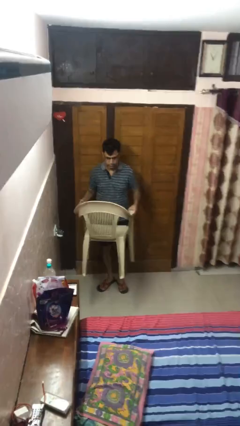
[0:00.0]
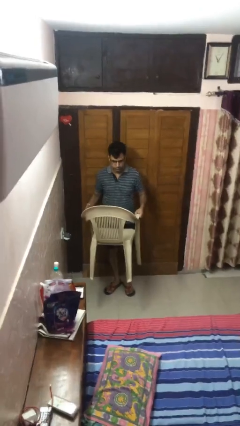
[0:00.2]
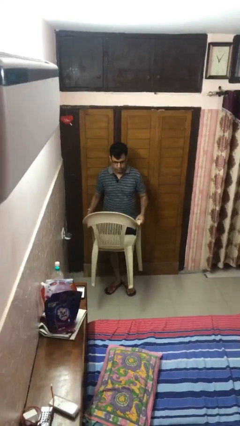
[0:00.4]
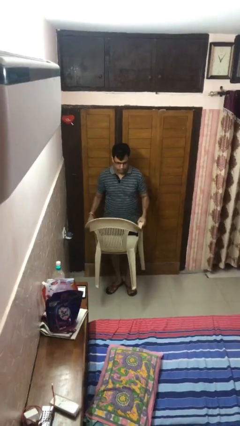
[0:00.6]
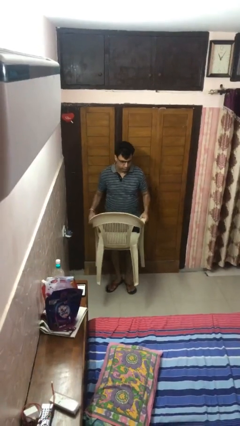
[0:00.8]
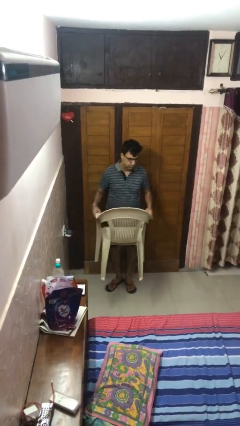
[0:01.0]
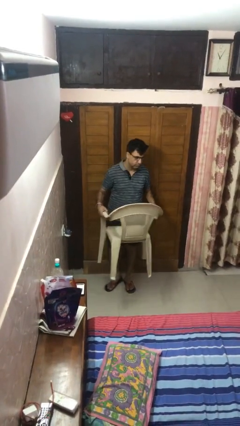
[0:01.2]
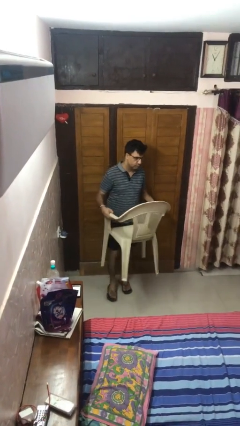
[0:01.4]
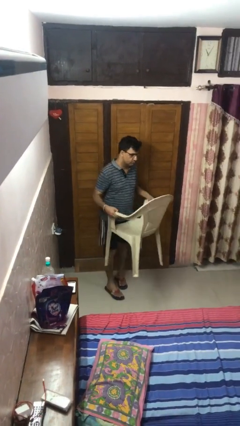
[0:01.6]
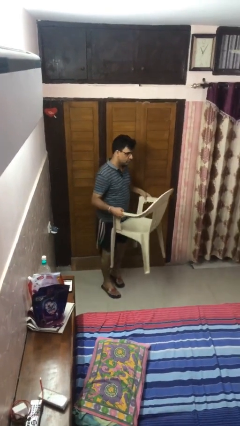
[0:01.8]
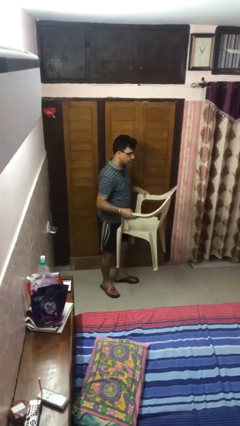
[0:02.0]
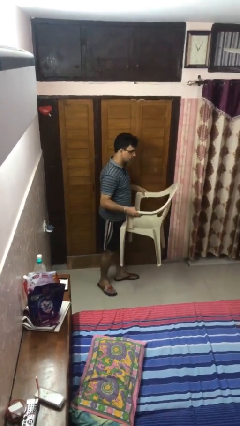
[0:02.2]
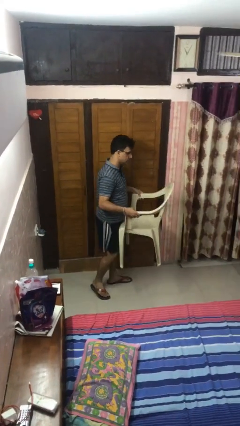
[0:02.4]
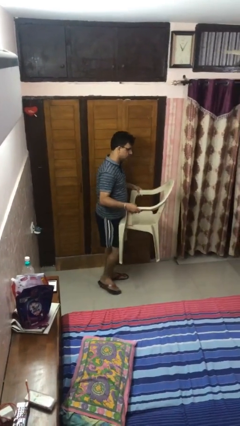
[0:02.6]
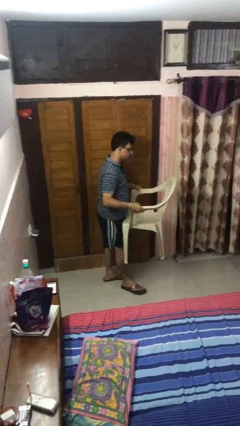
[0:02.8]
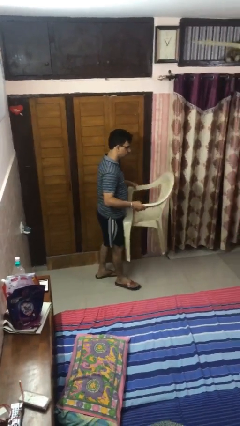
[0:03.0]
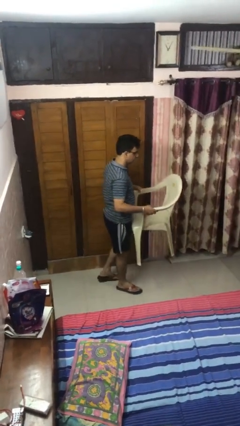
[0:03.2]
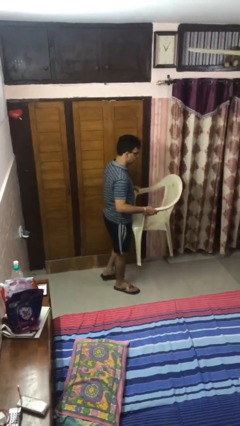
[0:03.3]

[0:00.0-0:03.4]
person carries furniture

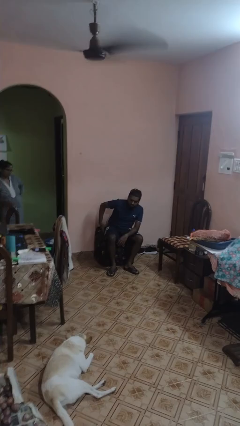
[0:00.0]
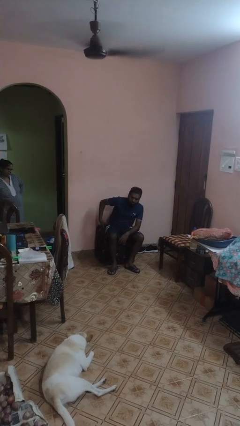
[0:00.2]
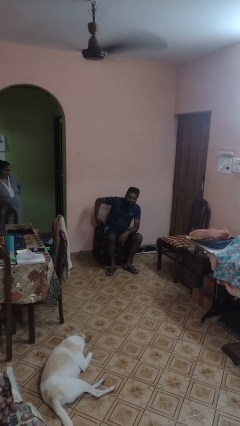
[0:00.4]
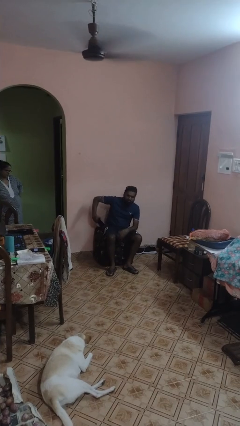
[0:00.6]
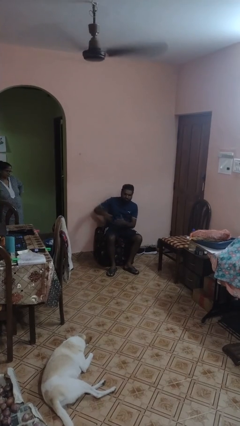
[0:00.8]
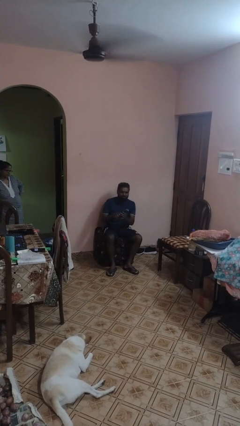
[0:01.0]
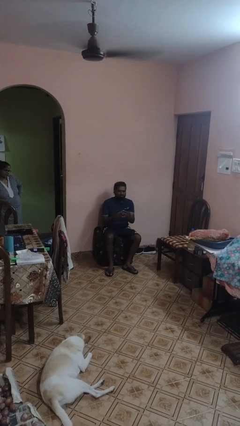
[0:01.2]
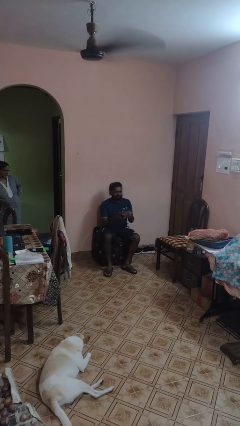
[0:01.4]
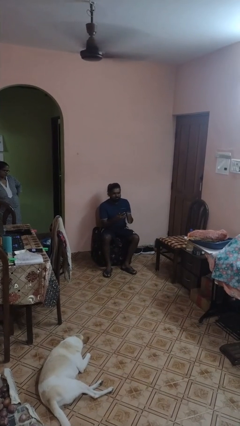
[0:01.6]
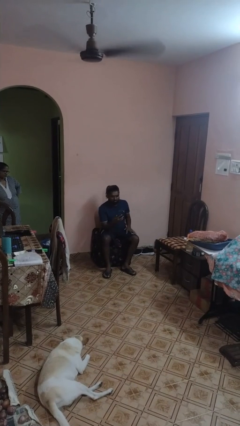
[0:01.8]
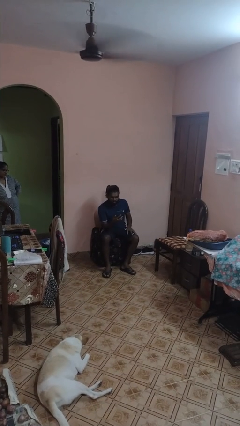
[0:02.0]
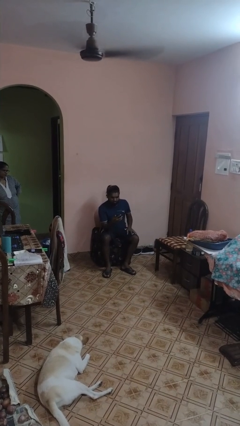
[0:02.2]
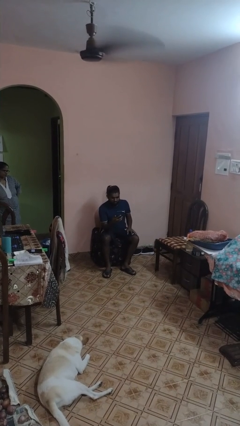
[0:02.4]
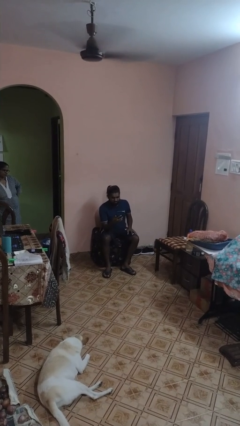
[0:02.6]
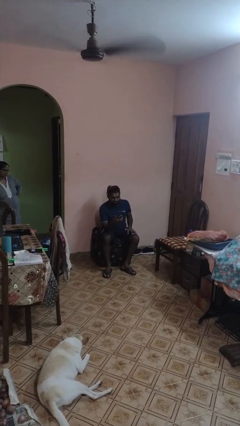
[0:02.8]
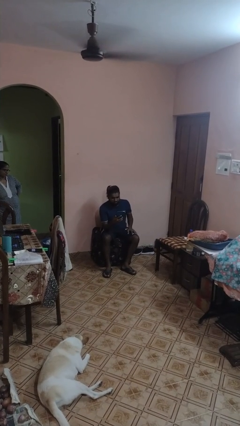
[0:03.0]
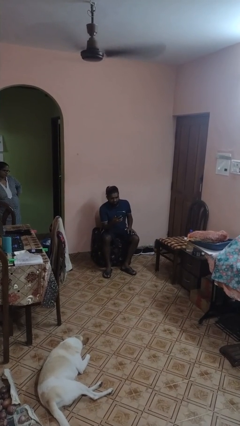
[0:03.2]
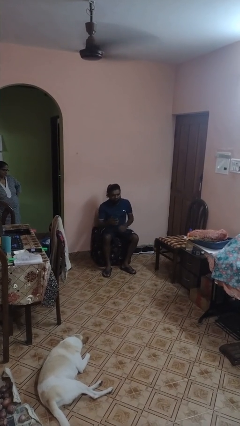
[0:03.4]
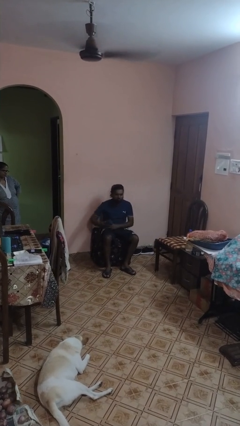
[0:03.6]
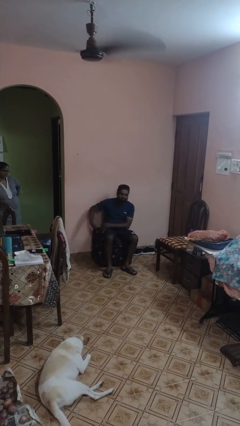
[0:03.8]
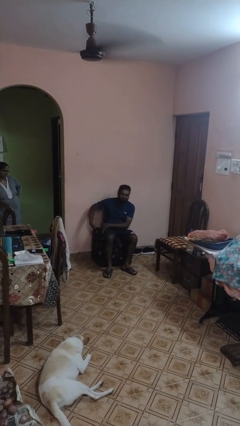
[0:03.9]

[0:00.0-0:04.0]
person takes phone from pocket

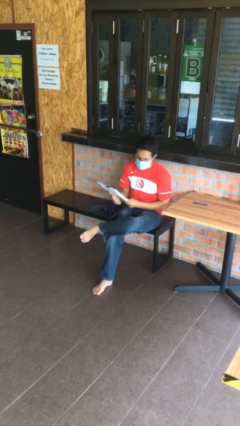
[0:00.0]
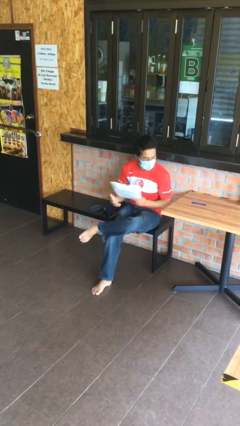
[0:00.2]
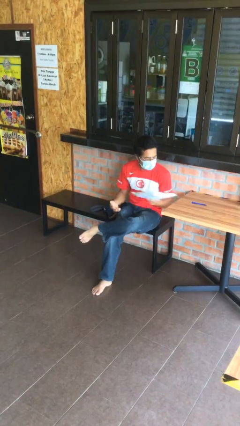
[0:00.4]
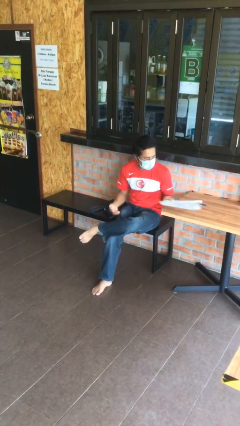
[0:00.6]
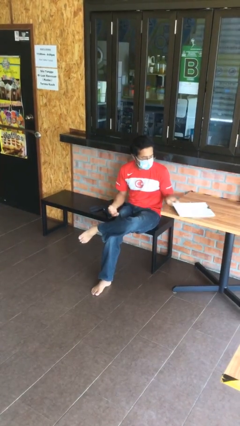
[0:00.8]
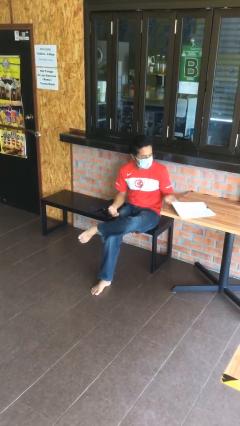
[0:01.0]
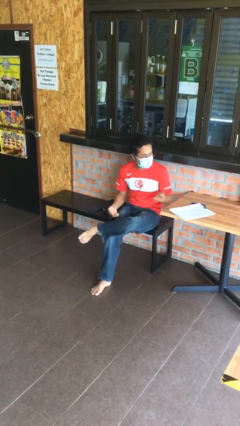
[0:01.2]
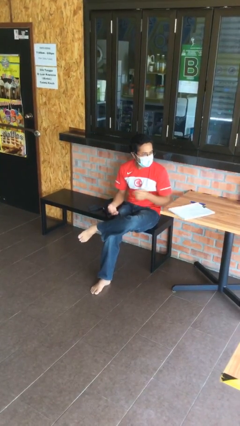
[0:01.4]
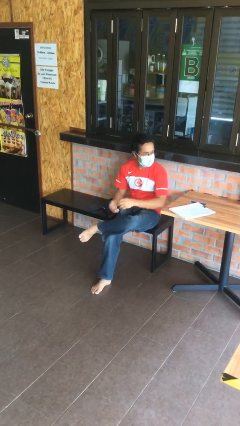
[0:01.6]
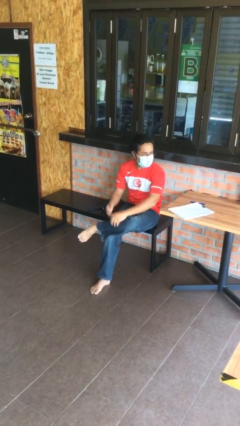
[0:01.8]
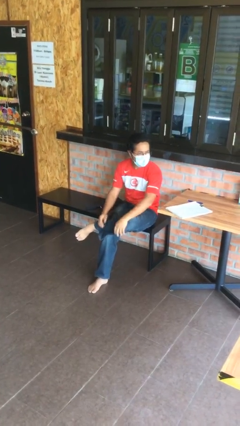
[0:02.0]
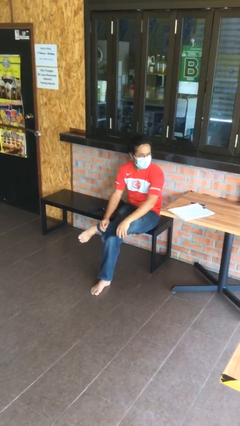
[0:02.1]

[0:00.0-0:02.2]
person puts down object on table

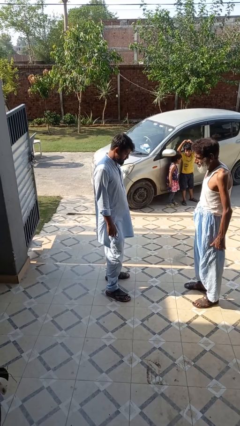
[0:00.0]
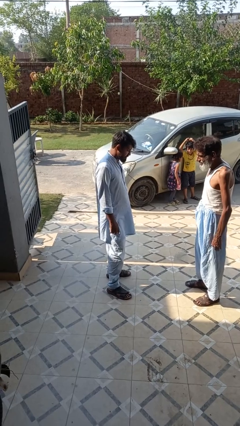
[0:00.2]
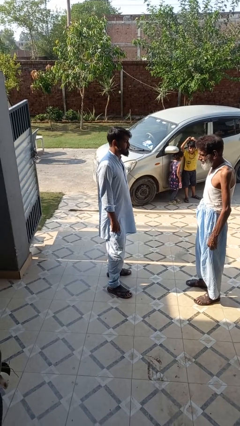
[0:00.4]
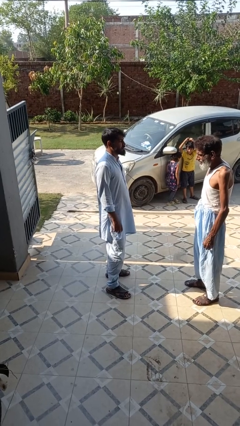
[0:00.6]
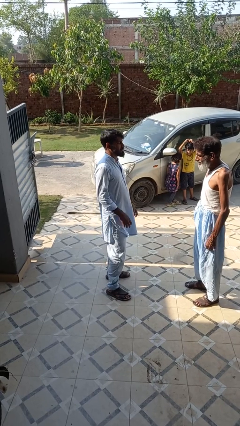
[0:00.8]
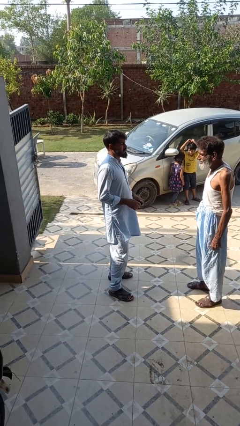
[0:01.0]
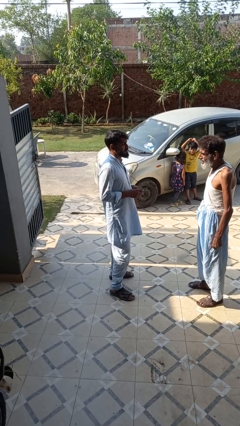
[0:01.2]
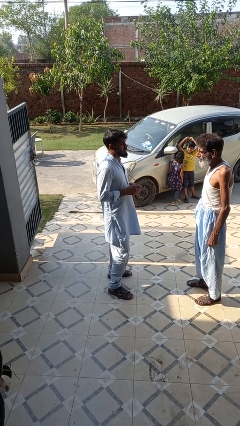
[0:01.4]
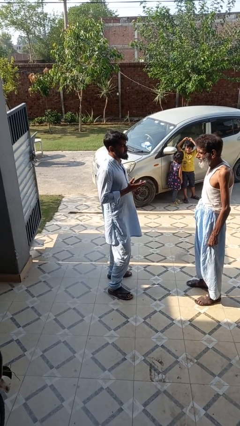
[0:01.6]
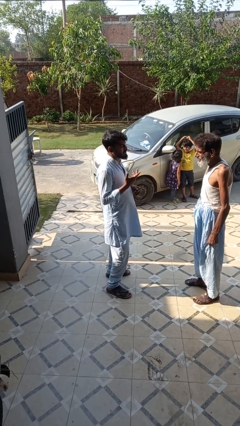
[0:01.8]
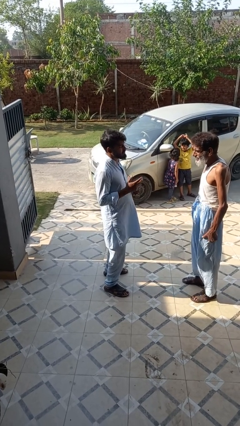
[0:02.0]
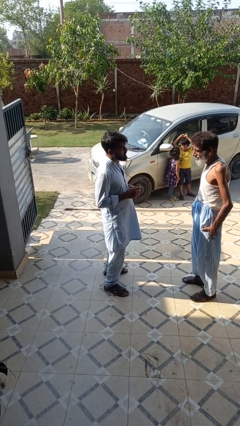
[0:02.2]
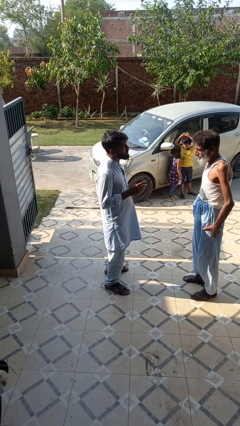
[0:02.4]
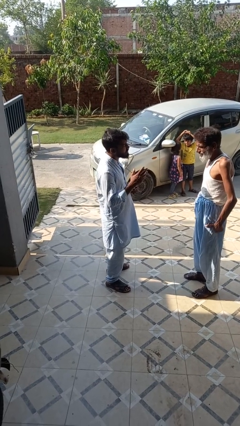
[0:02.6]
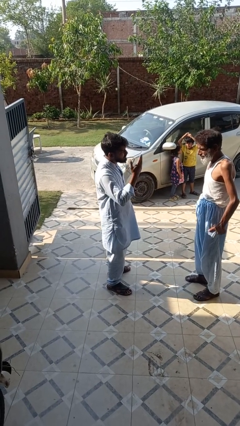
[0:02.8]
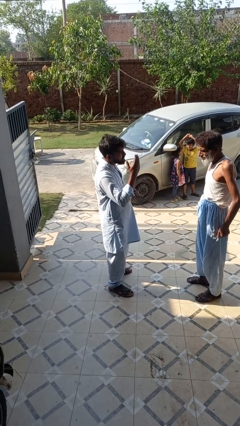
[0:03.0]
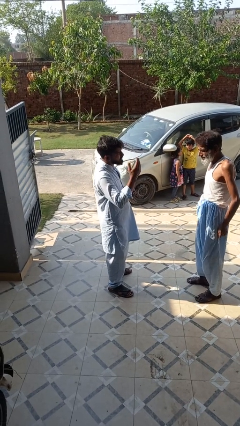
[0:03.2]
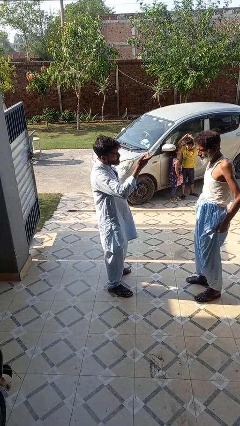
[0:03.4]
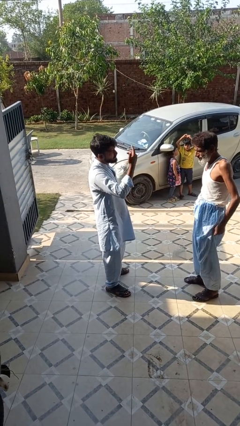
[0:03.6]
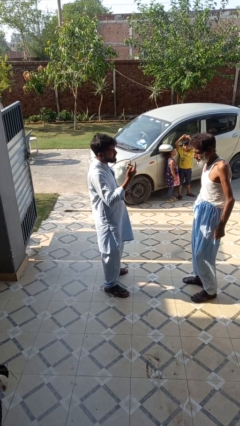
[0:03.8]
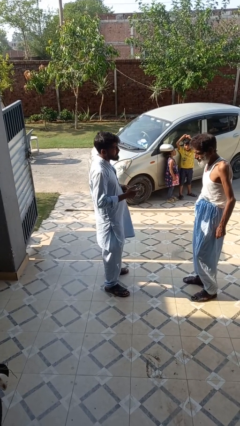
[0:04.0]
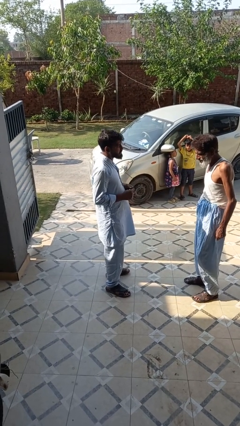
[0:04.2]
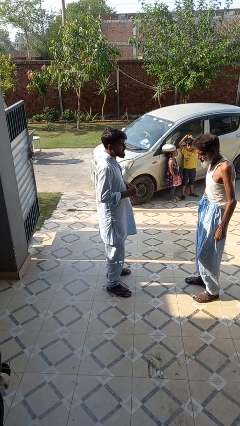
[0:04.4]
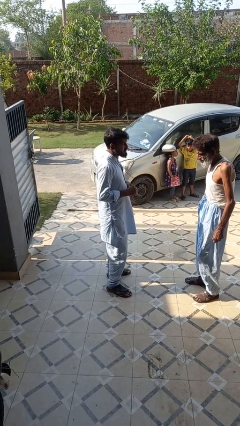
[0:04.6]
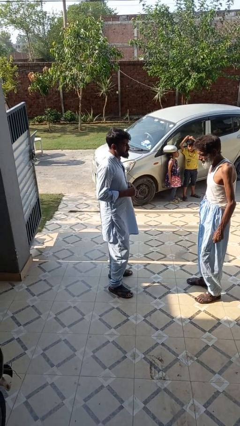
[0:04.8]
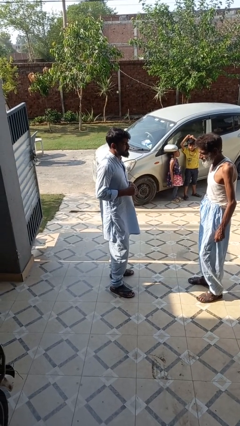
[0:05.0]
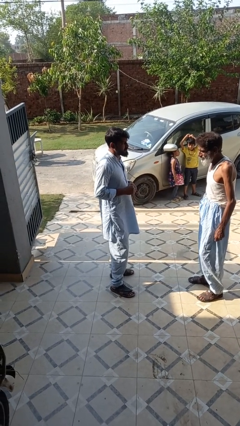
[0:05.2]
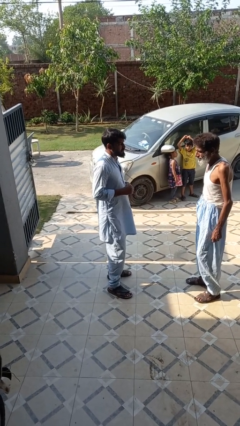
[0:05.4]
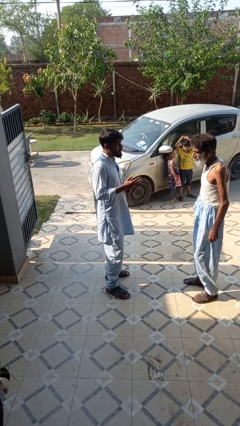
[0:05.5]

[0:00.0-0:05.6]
person talks to person

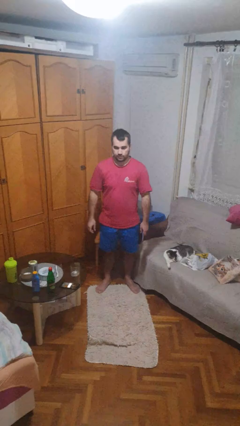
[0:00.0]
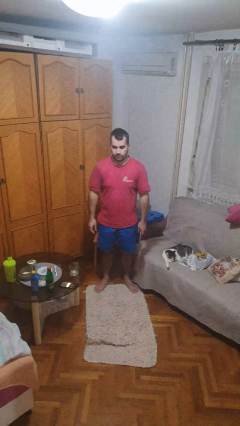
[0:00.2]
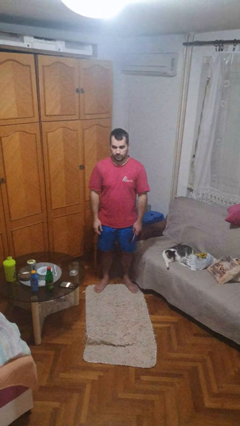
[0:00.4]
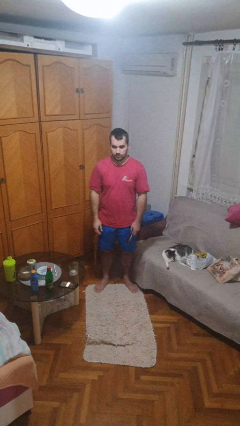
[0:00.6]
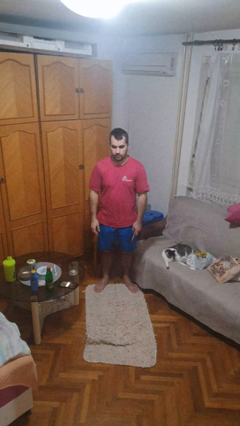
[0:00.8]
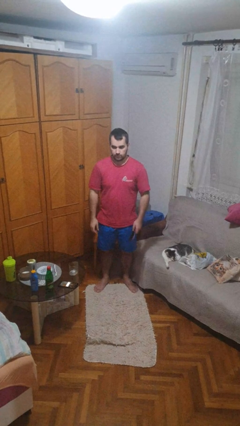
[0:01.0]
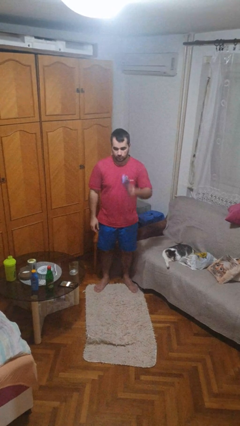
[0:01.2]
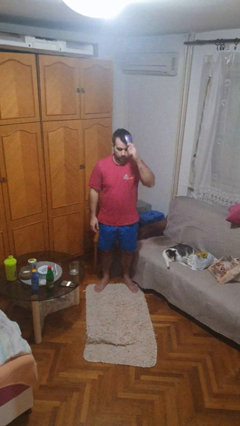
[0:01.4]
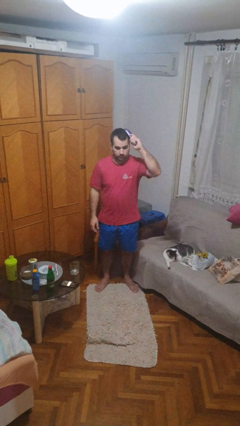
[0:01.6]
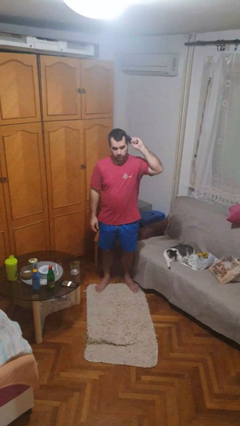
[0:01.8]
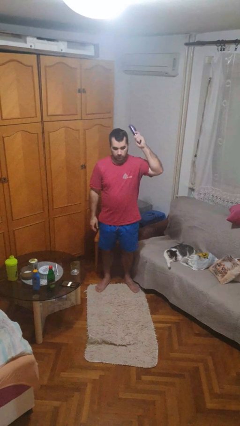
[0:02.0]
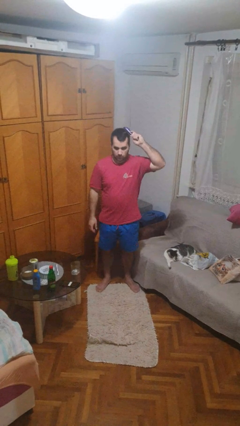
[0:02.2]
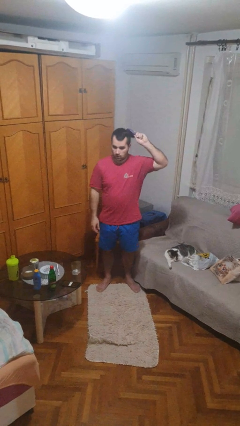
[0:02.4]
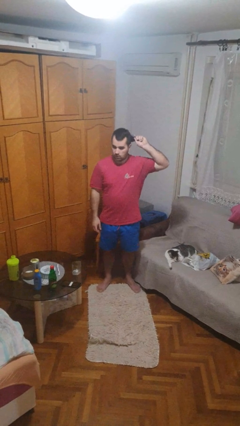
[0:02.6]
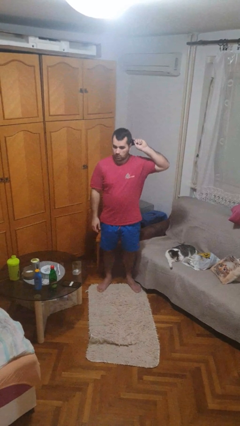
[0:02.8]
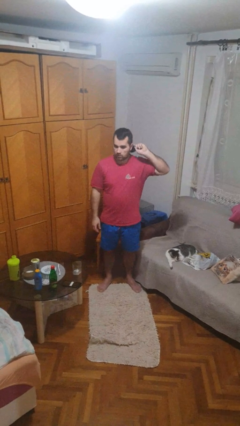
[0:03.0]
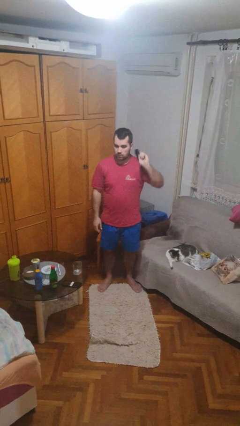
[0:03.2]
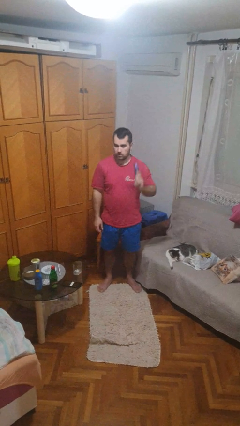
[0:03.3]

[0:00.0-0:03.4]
person brushes hair
